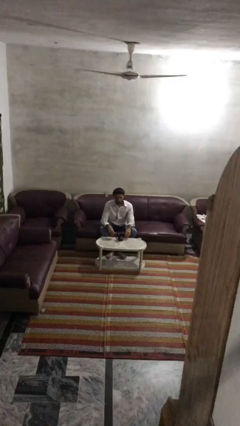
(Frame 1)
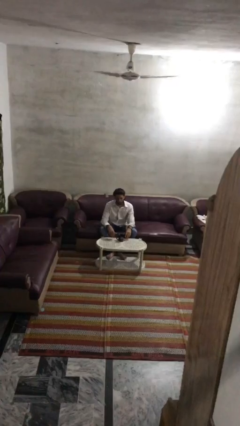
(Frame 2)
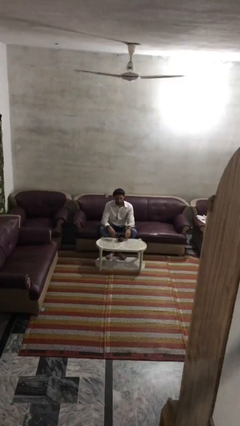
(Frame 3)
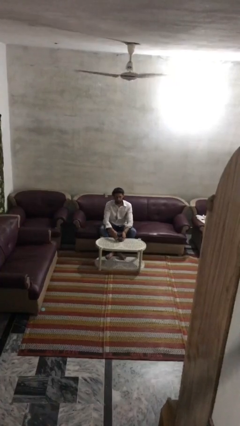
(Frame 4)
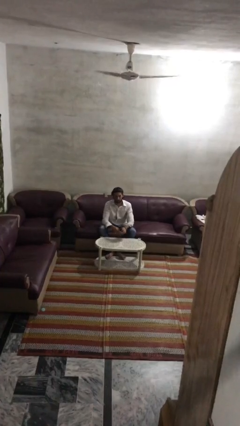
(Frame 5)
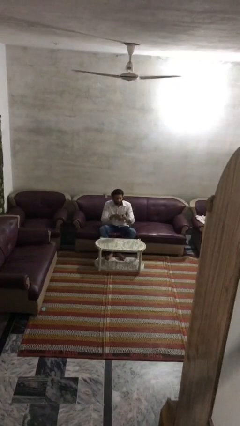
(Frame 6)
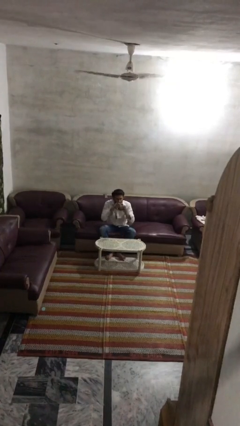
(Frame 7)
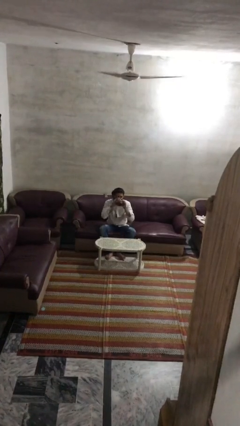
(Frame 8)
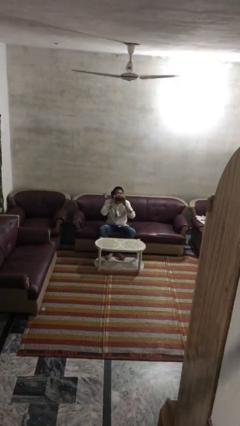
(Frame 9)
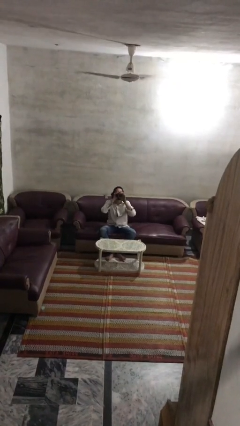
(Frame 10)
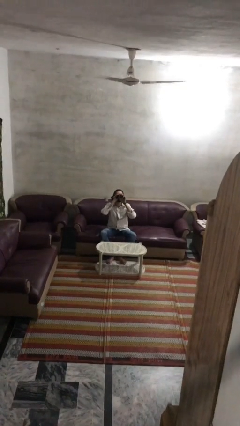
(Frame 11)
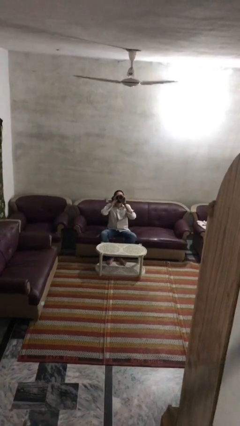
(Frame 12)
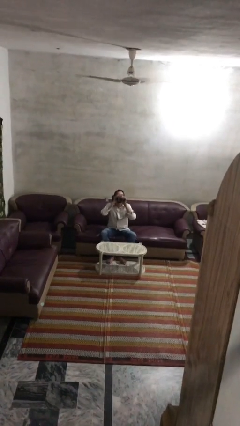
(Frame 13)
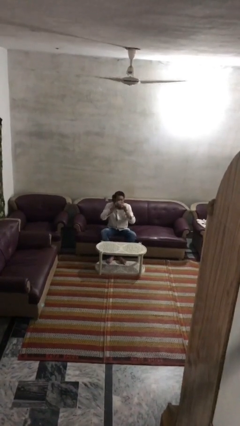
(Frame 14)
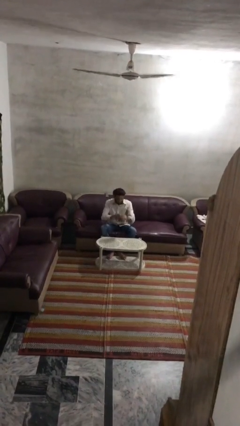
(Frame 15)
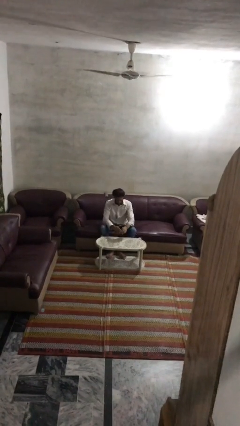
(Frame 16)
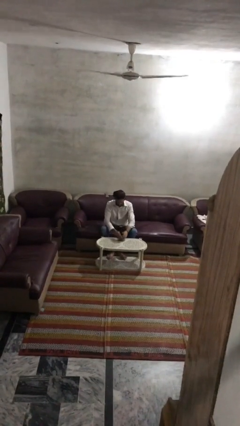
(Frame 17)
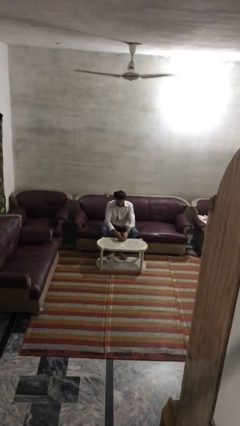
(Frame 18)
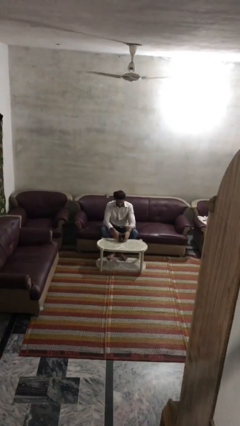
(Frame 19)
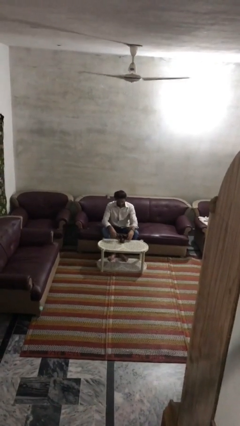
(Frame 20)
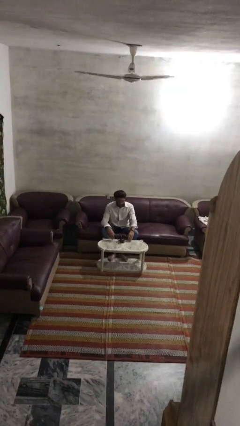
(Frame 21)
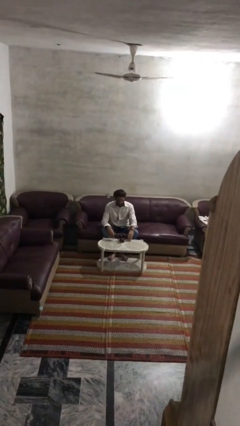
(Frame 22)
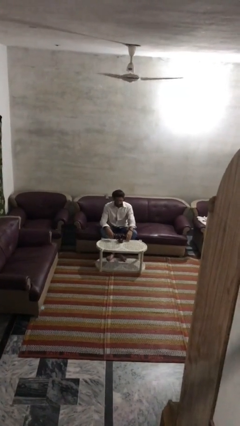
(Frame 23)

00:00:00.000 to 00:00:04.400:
person drinks from mug

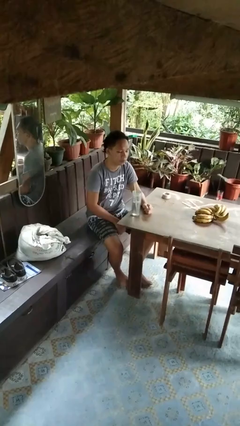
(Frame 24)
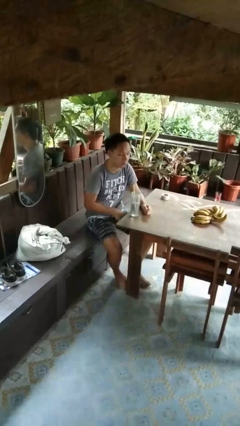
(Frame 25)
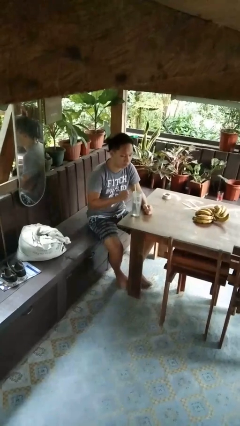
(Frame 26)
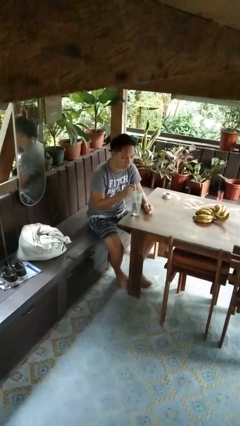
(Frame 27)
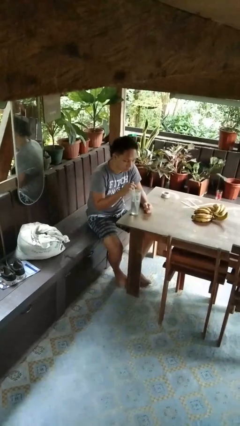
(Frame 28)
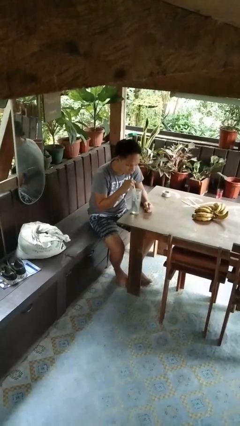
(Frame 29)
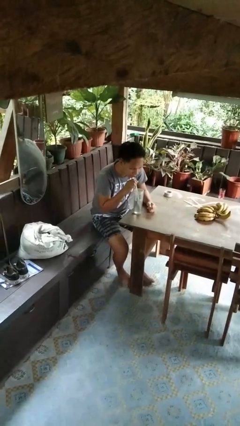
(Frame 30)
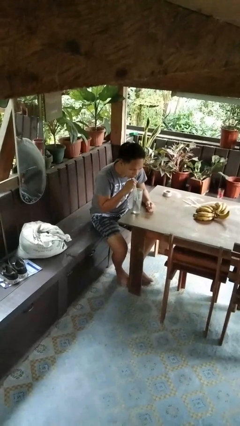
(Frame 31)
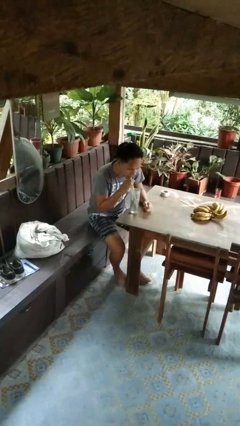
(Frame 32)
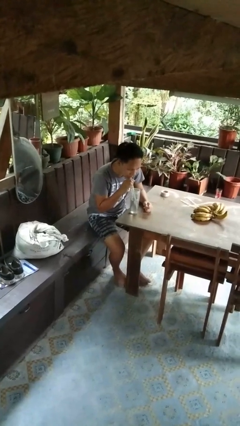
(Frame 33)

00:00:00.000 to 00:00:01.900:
person drinks from straw

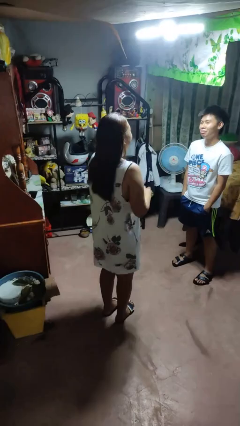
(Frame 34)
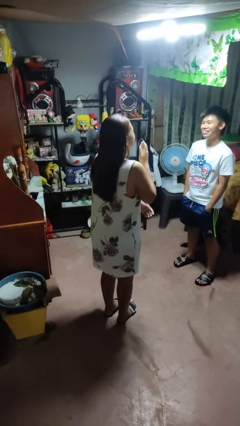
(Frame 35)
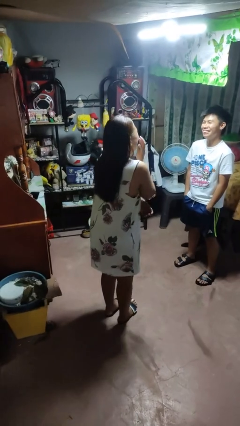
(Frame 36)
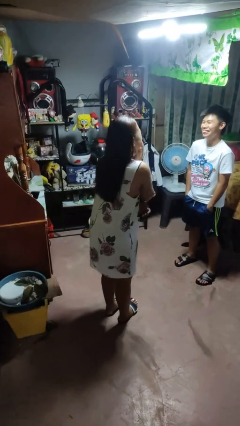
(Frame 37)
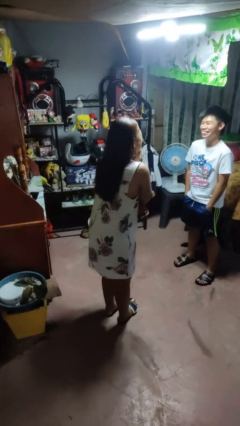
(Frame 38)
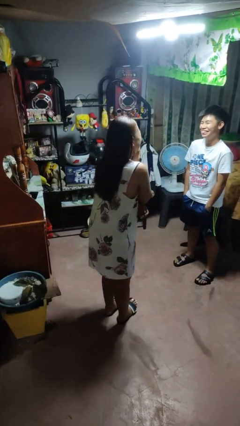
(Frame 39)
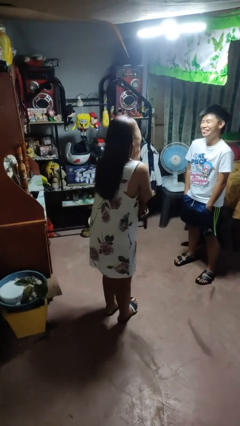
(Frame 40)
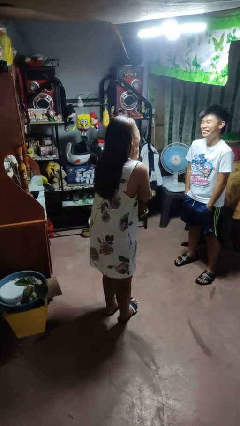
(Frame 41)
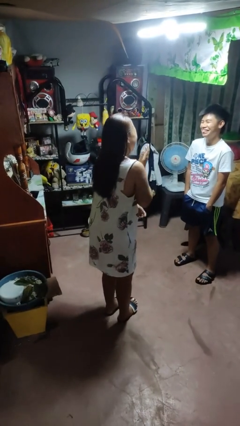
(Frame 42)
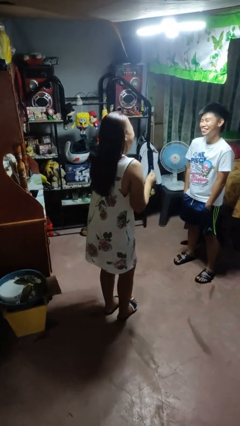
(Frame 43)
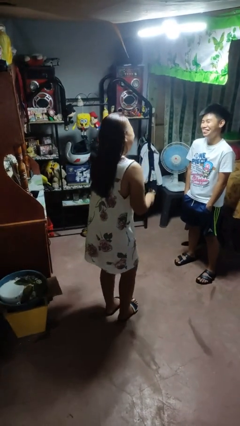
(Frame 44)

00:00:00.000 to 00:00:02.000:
person laughs with person

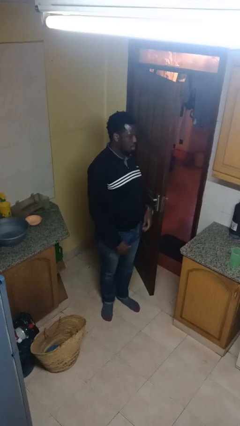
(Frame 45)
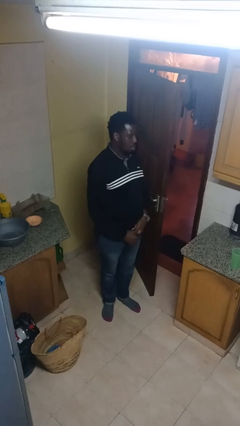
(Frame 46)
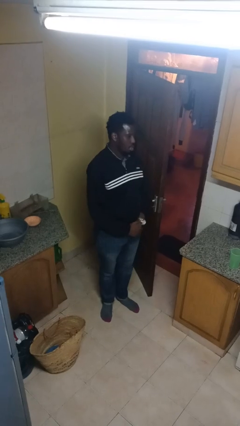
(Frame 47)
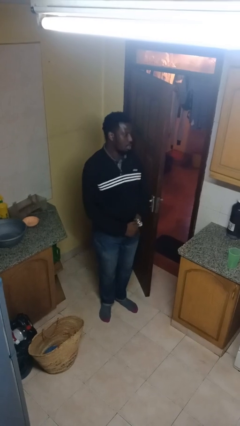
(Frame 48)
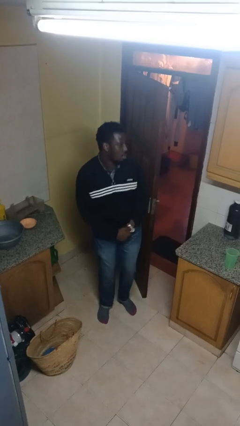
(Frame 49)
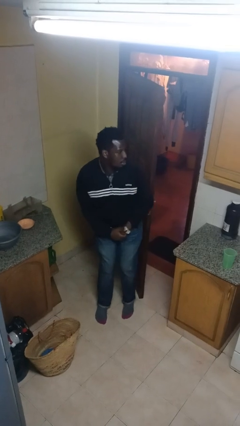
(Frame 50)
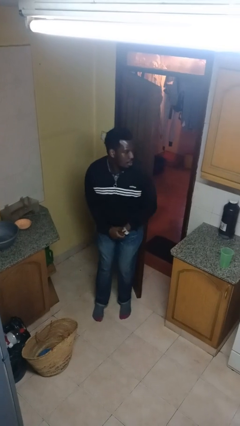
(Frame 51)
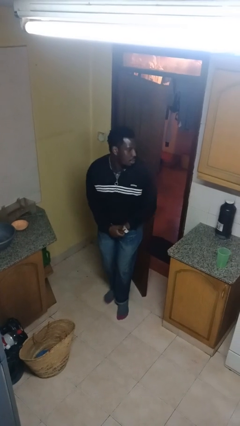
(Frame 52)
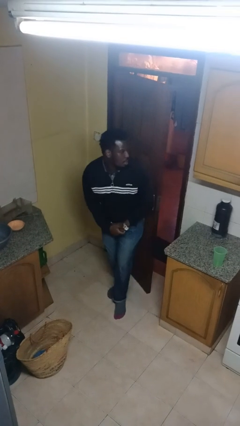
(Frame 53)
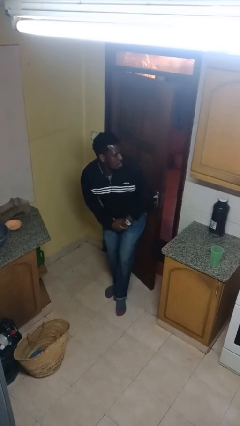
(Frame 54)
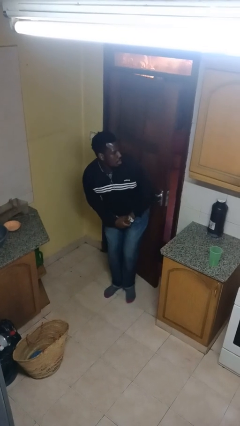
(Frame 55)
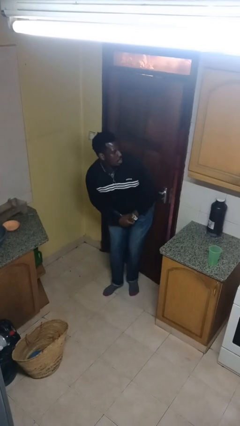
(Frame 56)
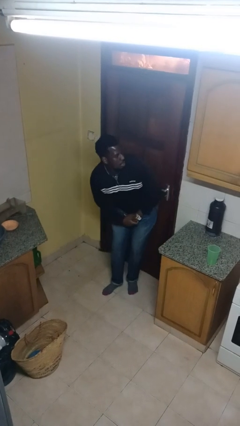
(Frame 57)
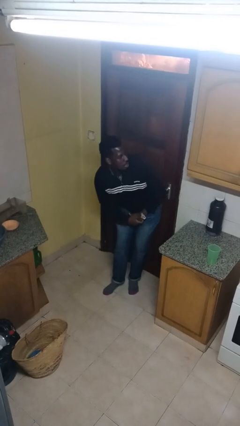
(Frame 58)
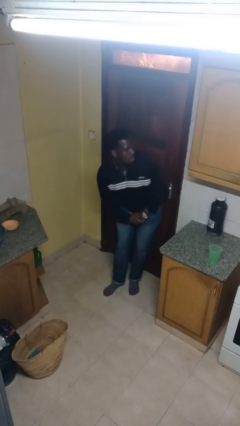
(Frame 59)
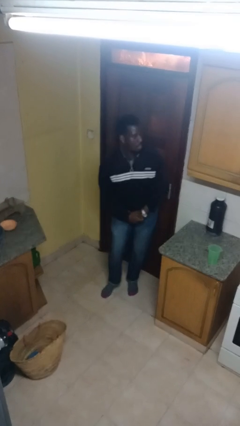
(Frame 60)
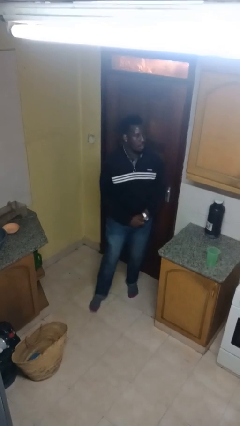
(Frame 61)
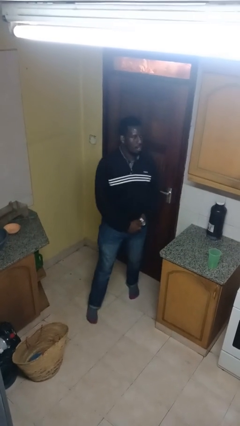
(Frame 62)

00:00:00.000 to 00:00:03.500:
person closes door with hip

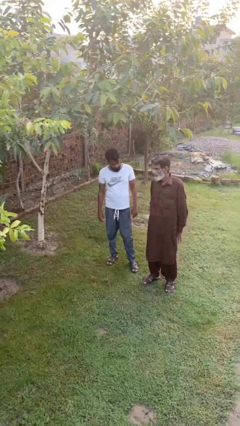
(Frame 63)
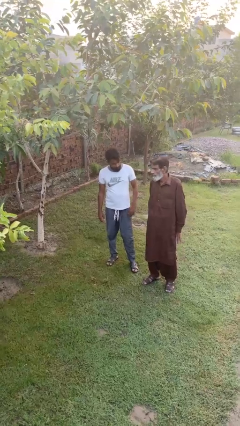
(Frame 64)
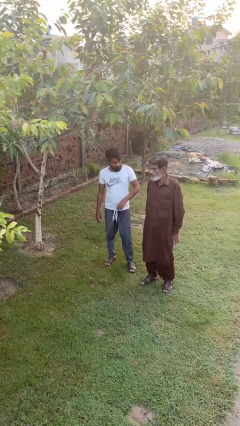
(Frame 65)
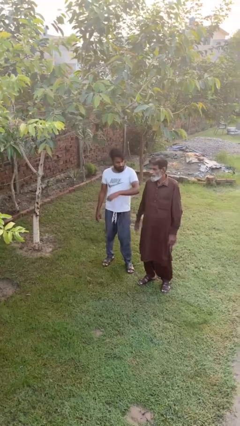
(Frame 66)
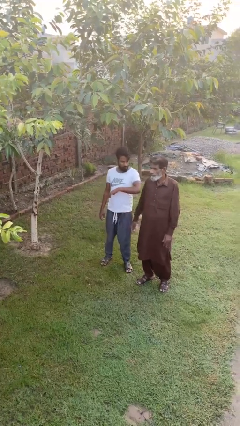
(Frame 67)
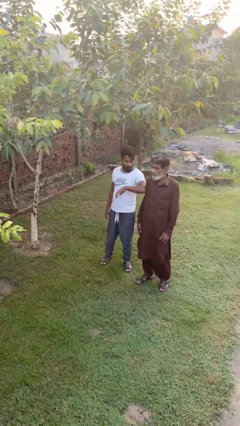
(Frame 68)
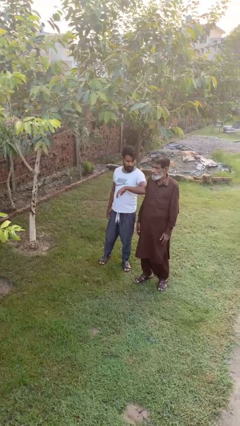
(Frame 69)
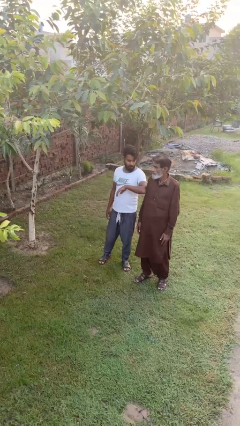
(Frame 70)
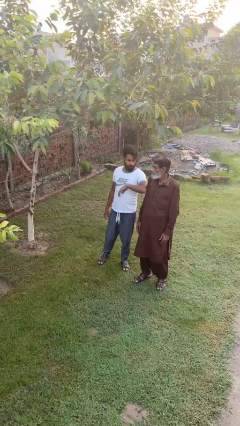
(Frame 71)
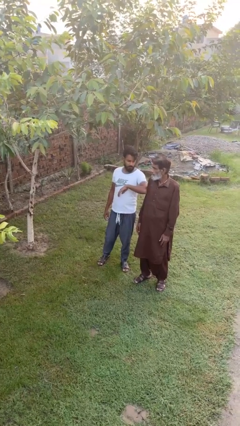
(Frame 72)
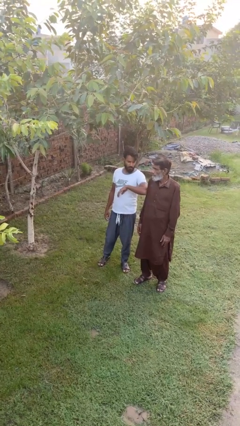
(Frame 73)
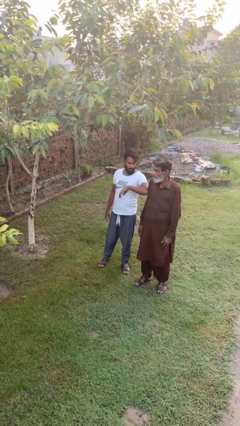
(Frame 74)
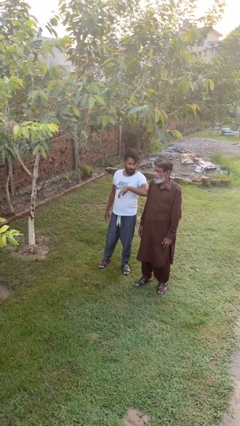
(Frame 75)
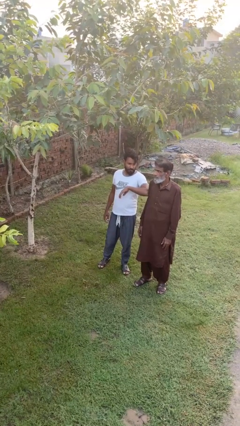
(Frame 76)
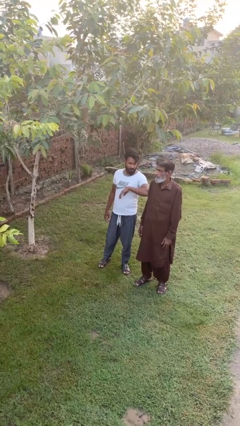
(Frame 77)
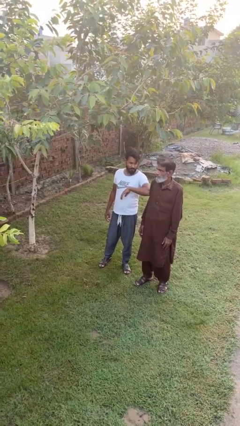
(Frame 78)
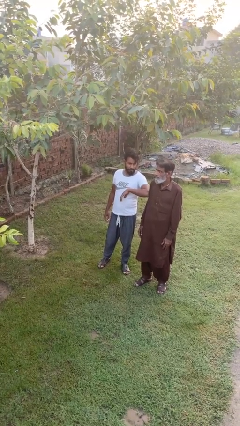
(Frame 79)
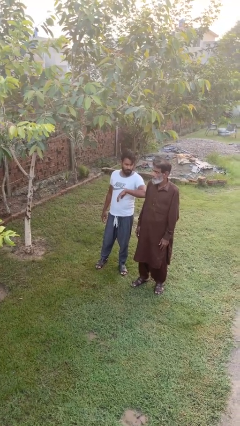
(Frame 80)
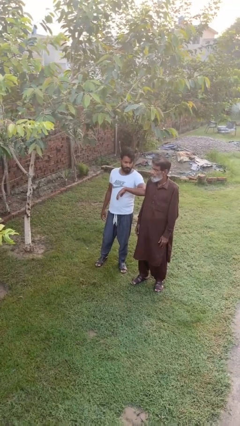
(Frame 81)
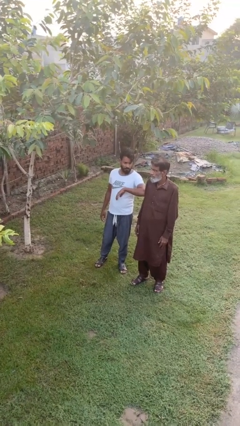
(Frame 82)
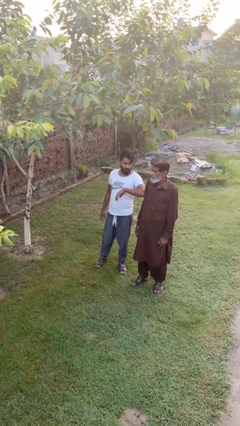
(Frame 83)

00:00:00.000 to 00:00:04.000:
person nudges person with elbow

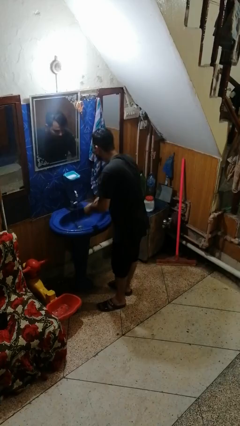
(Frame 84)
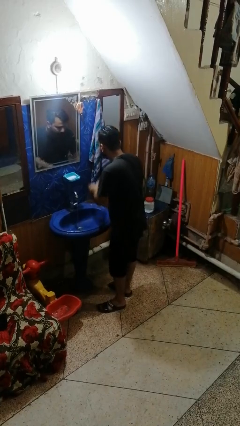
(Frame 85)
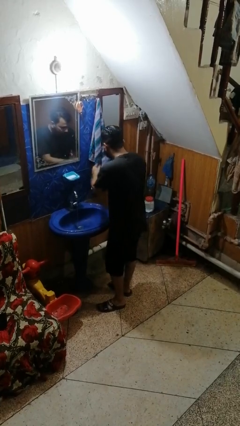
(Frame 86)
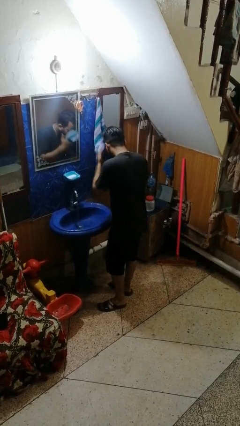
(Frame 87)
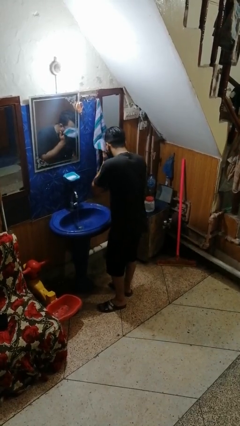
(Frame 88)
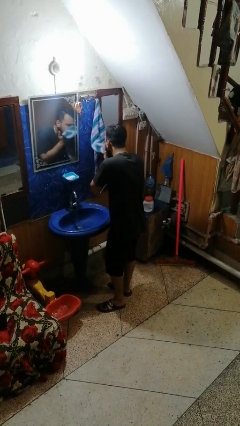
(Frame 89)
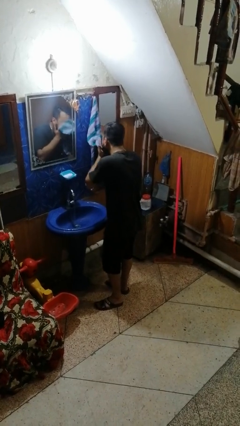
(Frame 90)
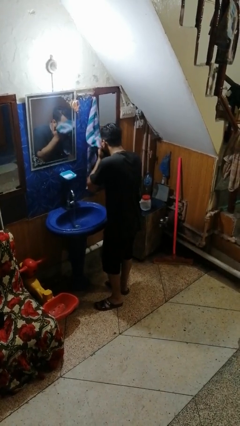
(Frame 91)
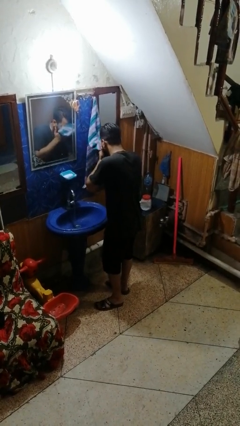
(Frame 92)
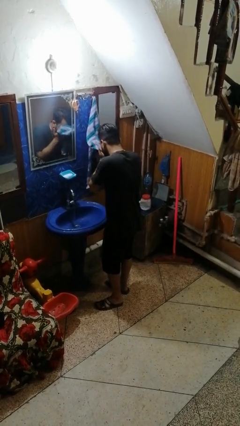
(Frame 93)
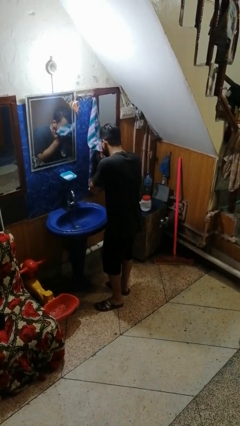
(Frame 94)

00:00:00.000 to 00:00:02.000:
person dries face with towel
